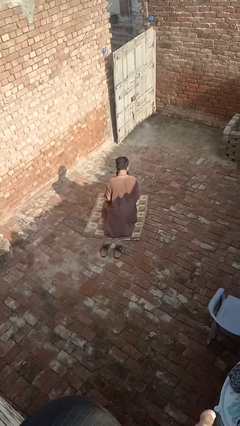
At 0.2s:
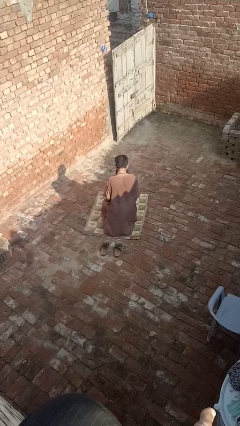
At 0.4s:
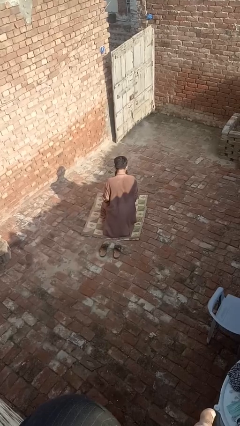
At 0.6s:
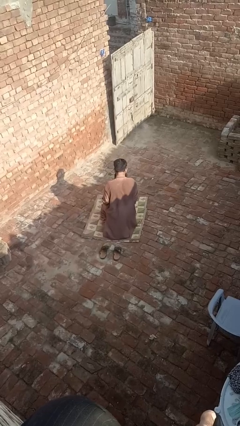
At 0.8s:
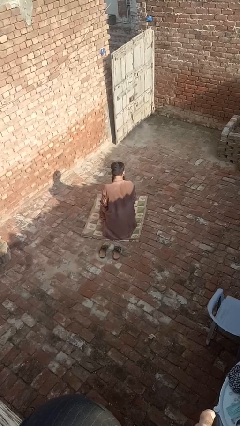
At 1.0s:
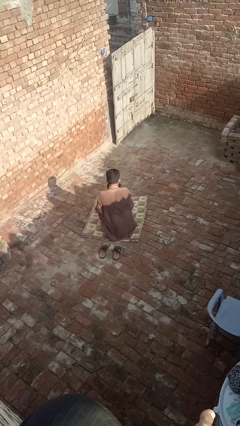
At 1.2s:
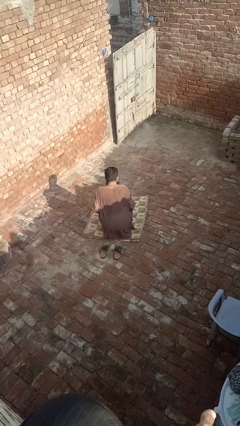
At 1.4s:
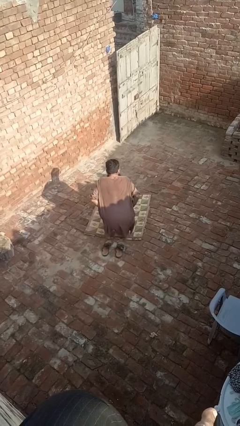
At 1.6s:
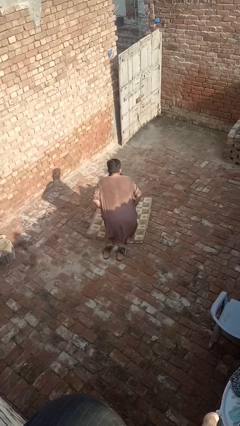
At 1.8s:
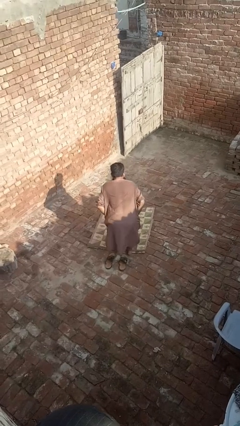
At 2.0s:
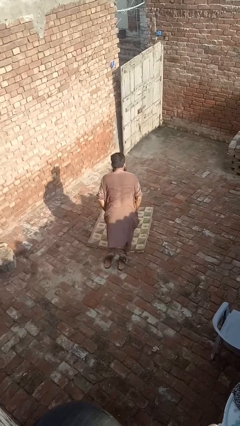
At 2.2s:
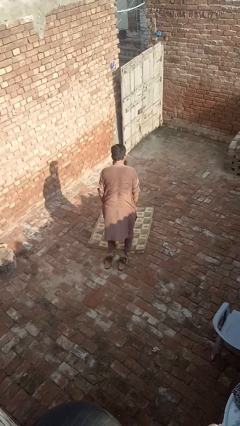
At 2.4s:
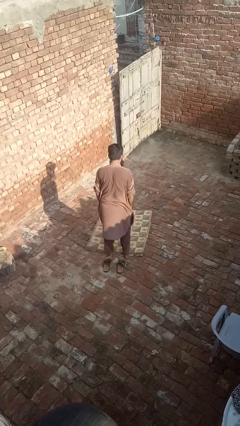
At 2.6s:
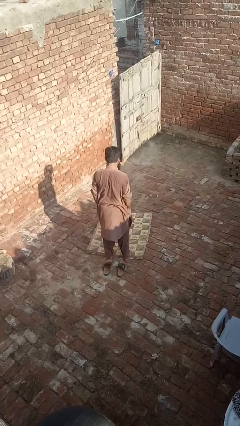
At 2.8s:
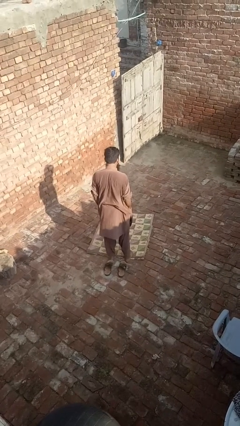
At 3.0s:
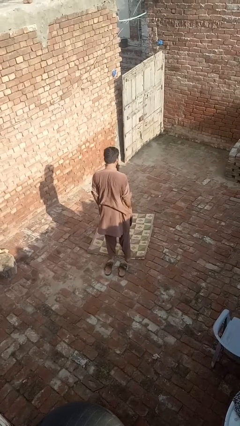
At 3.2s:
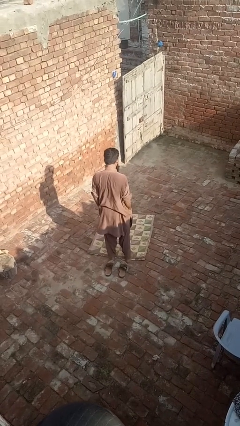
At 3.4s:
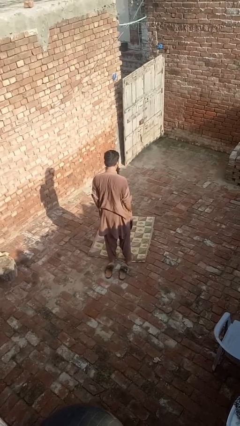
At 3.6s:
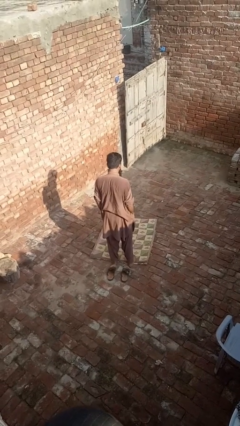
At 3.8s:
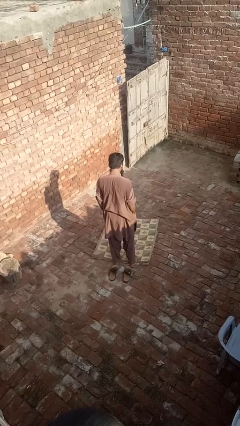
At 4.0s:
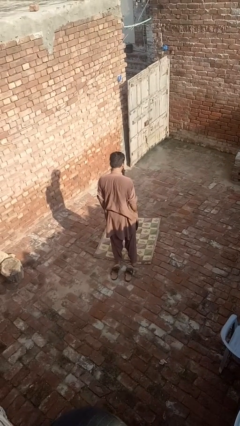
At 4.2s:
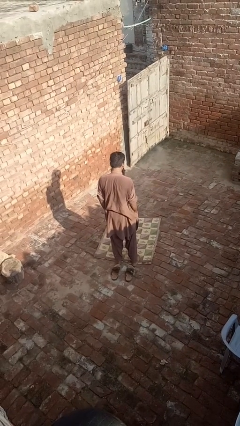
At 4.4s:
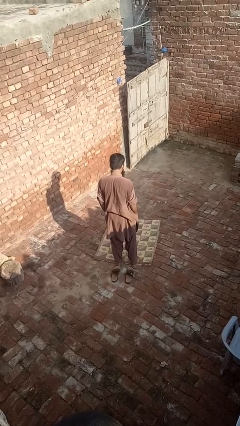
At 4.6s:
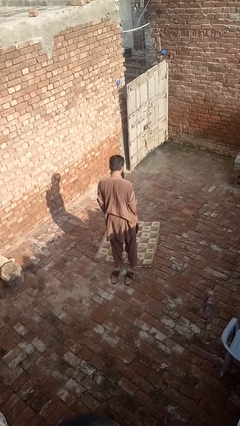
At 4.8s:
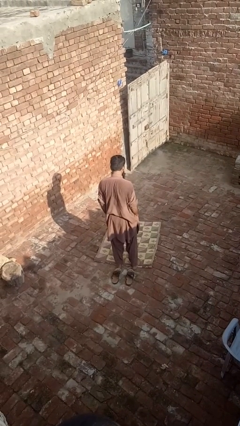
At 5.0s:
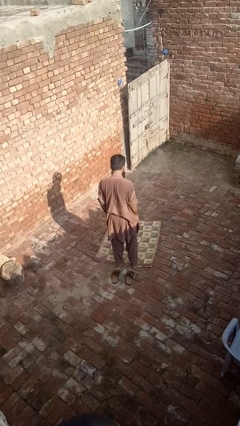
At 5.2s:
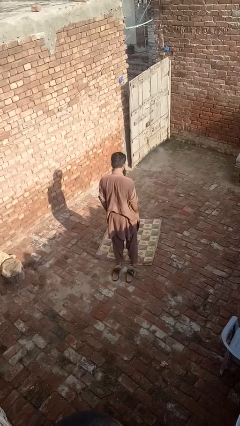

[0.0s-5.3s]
person stands up from floor

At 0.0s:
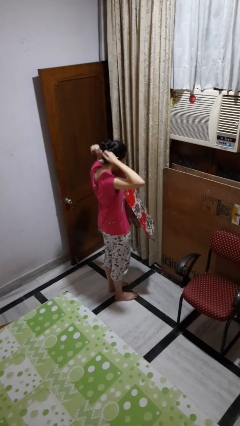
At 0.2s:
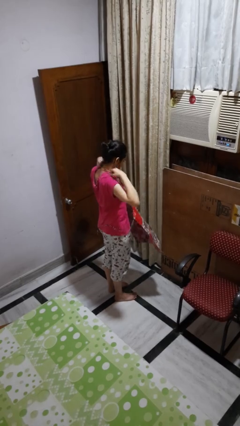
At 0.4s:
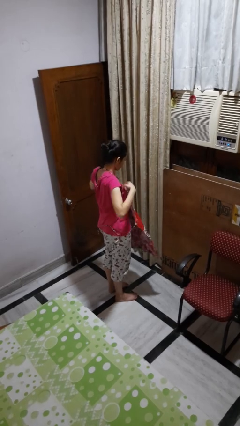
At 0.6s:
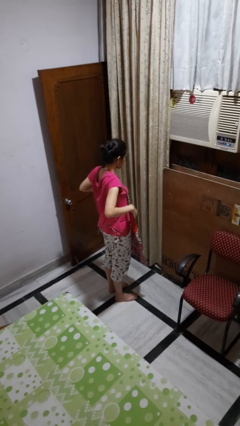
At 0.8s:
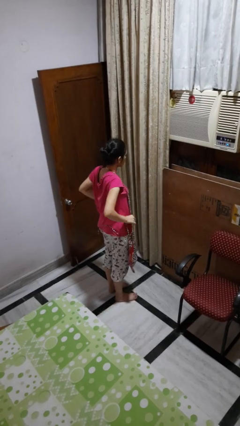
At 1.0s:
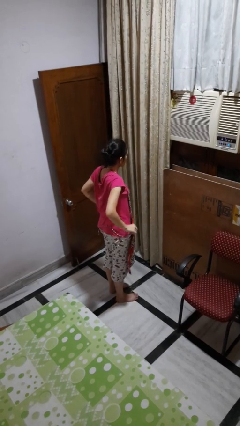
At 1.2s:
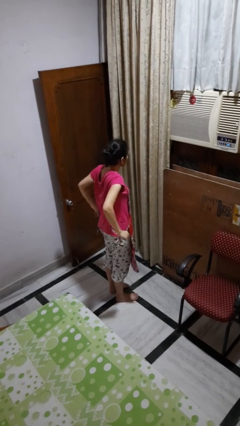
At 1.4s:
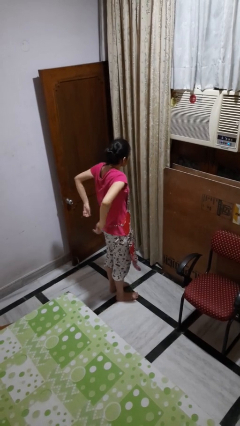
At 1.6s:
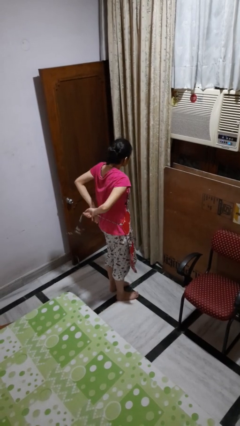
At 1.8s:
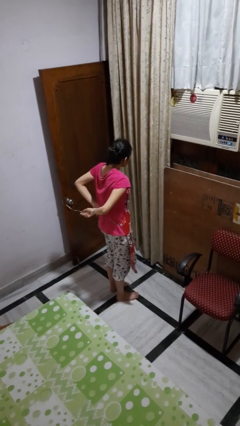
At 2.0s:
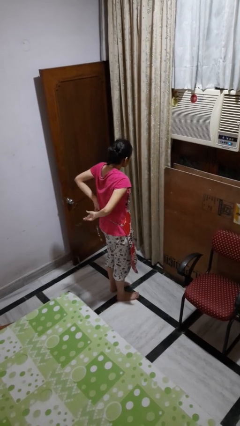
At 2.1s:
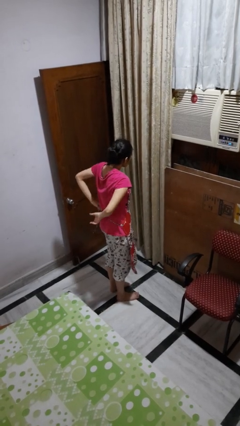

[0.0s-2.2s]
person puts on apron

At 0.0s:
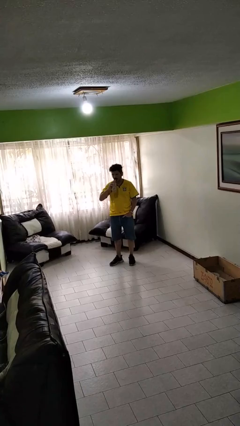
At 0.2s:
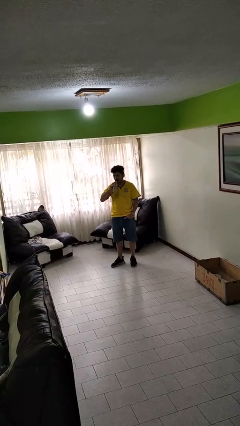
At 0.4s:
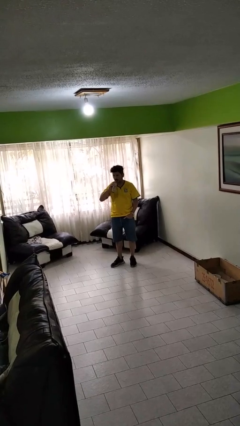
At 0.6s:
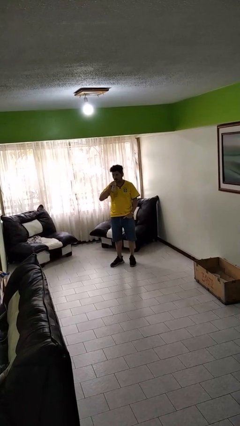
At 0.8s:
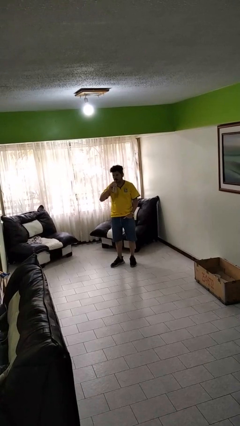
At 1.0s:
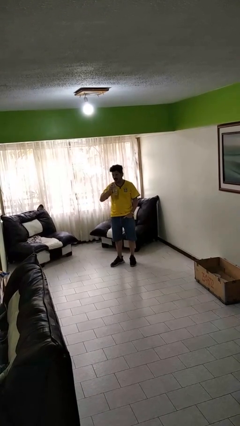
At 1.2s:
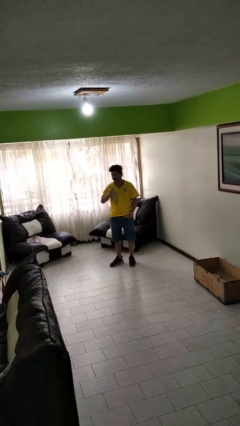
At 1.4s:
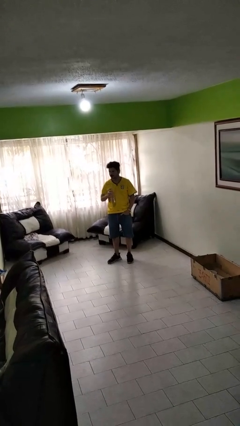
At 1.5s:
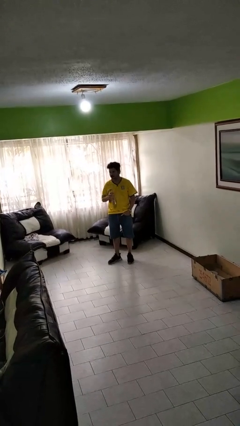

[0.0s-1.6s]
person drinks from straw

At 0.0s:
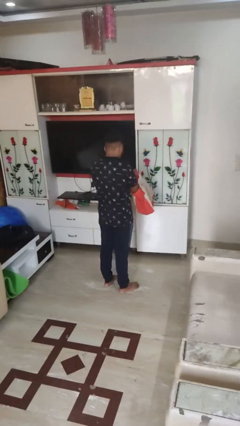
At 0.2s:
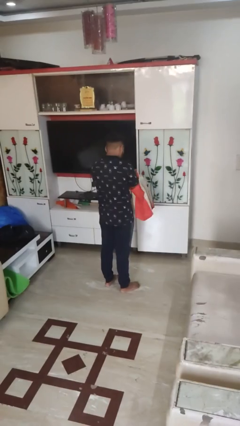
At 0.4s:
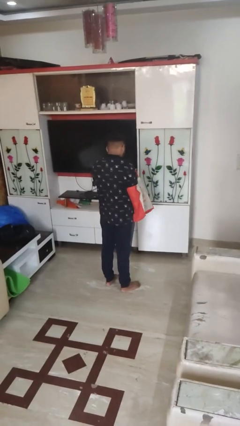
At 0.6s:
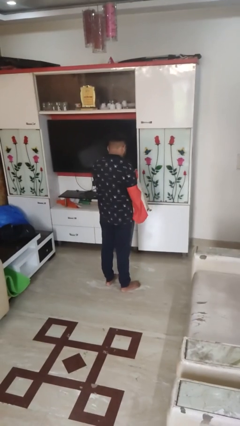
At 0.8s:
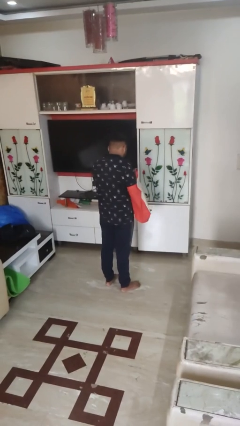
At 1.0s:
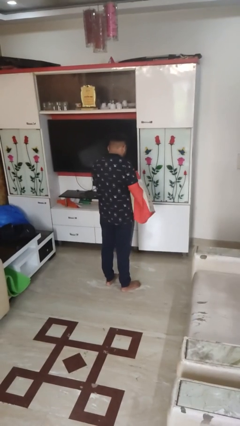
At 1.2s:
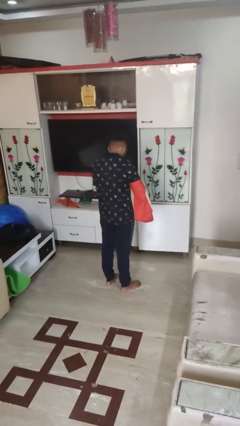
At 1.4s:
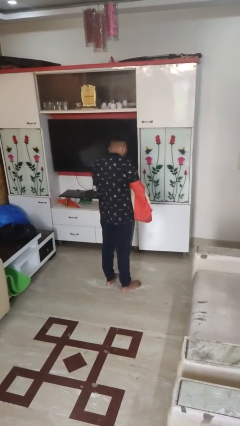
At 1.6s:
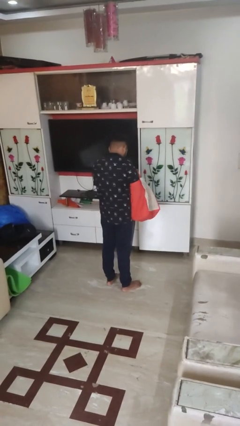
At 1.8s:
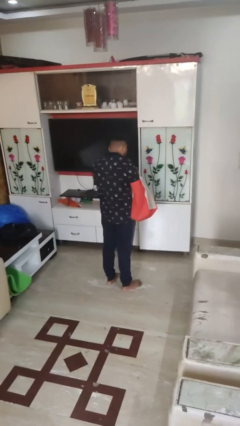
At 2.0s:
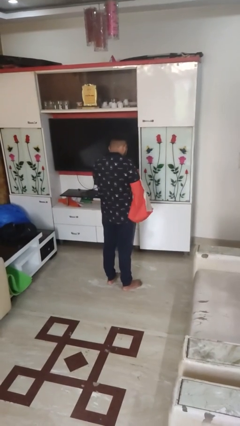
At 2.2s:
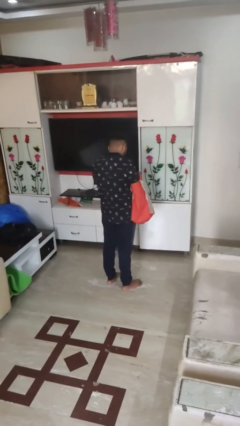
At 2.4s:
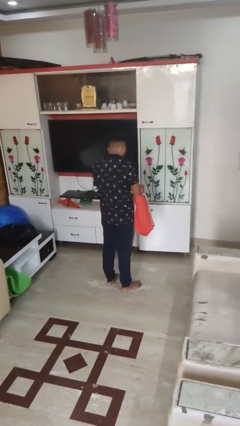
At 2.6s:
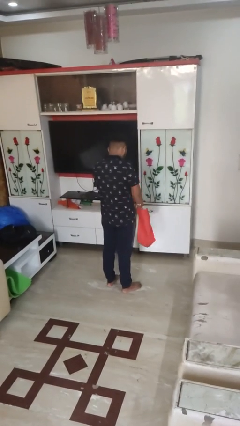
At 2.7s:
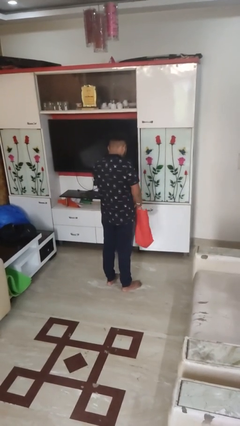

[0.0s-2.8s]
person searches in bag

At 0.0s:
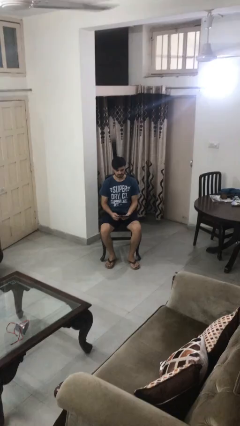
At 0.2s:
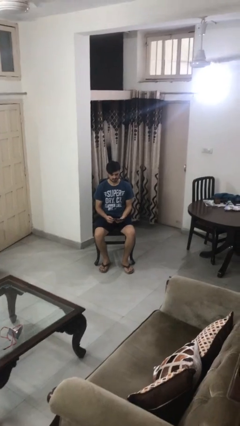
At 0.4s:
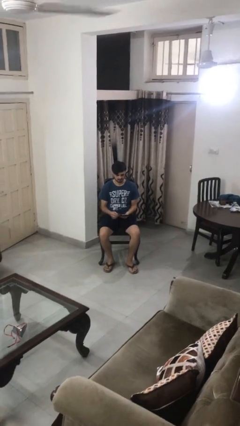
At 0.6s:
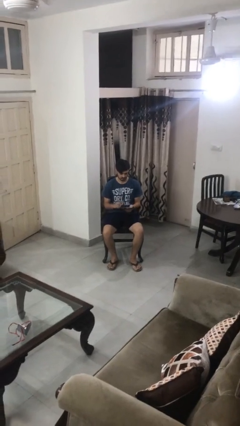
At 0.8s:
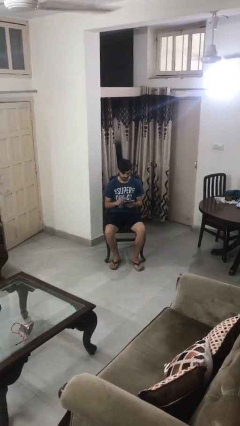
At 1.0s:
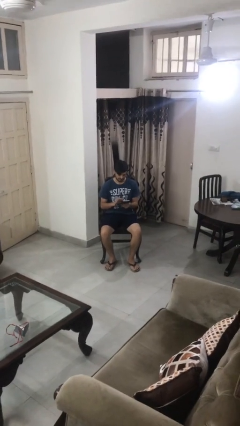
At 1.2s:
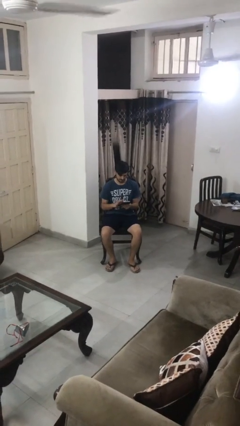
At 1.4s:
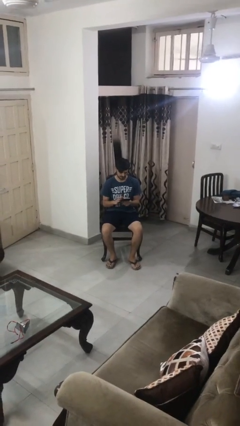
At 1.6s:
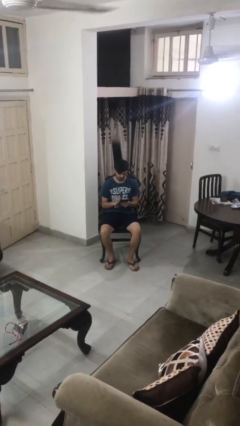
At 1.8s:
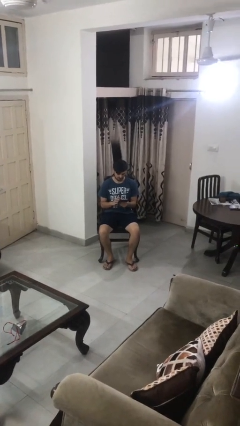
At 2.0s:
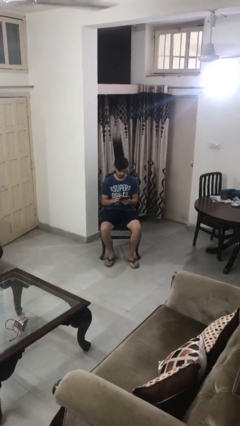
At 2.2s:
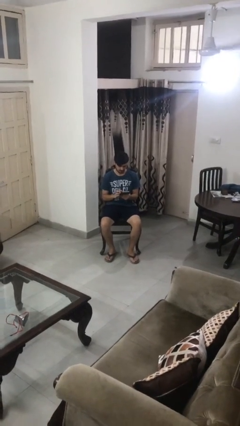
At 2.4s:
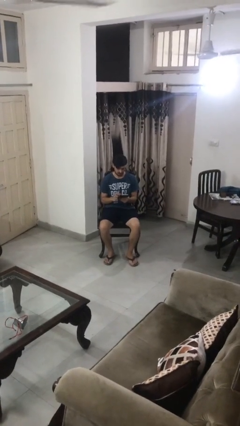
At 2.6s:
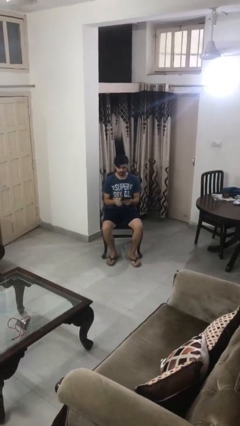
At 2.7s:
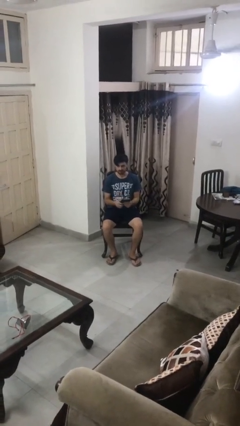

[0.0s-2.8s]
person interacts with tablet

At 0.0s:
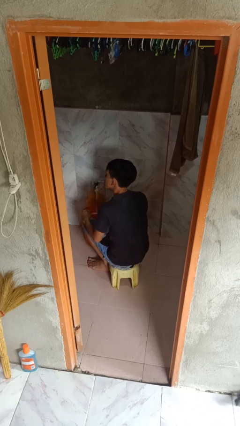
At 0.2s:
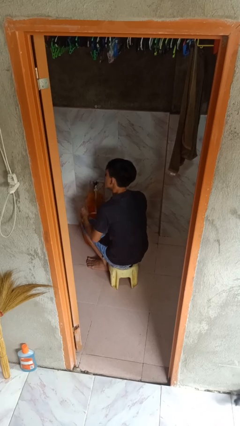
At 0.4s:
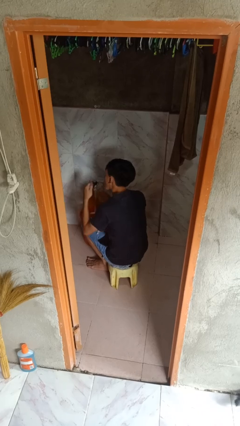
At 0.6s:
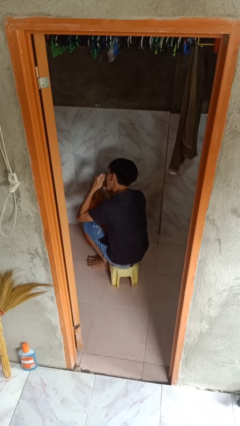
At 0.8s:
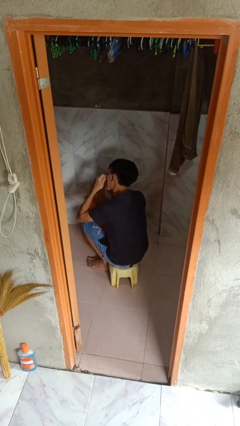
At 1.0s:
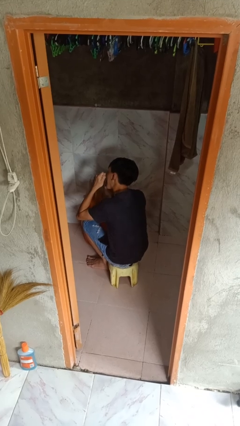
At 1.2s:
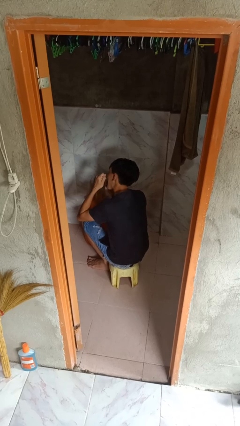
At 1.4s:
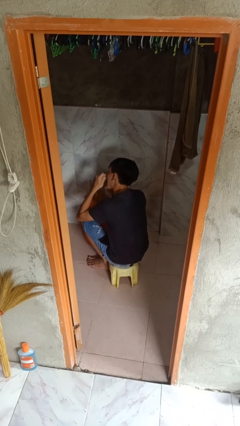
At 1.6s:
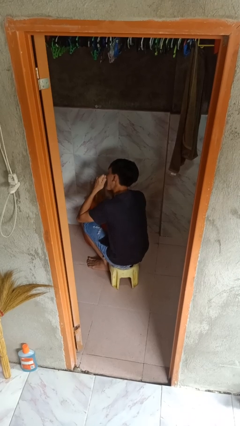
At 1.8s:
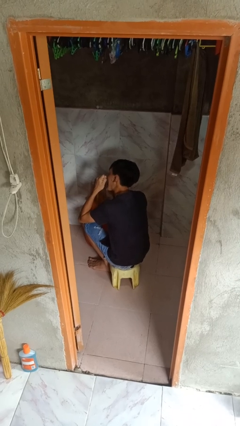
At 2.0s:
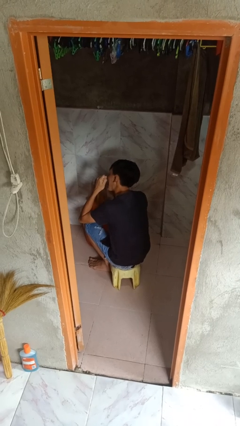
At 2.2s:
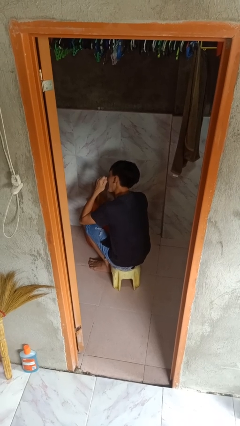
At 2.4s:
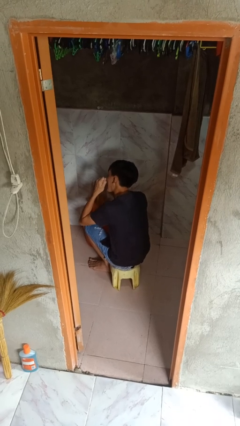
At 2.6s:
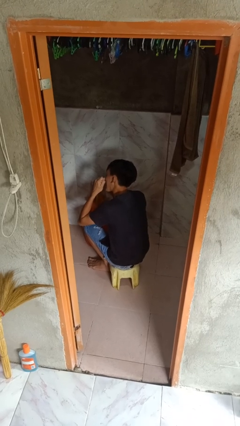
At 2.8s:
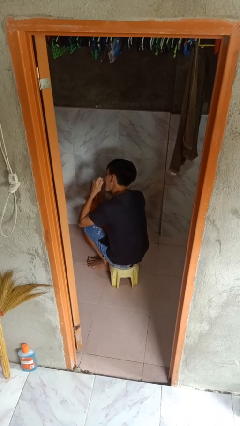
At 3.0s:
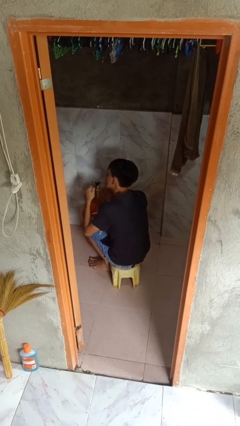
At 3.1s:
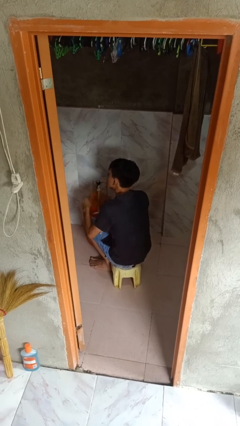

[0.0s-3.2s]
person flosses
